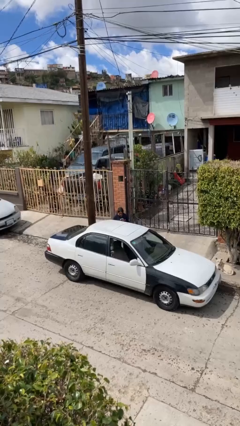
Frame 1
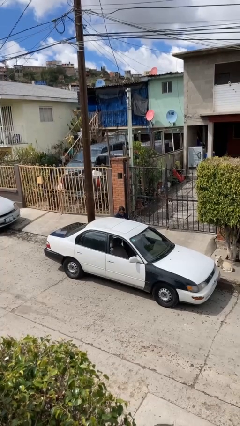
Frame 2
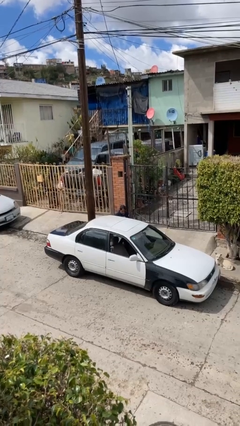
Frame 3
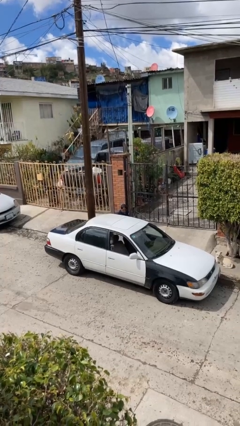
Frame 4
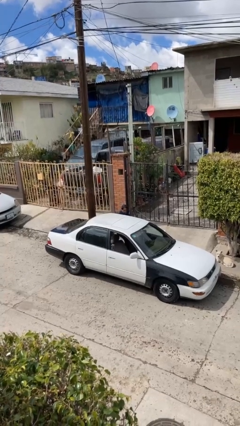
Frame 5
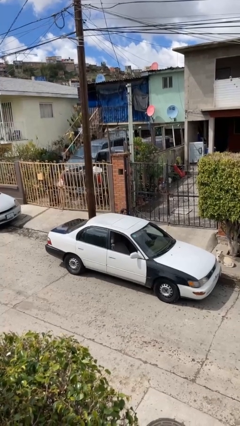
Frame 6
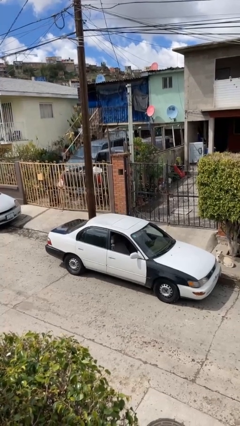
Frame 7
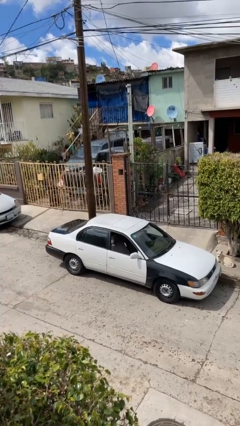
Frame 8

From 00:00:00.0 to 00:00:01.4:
person enters car

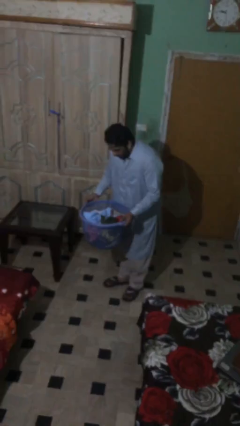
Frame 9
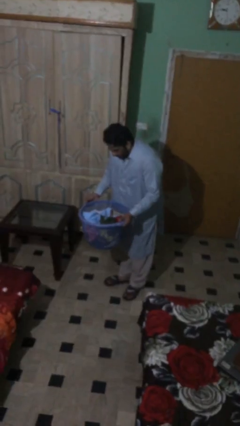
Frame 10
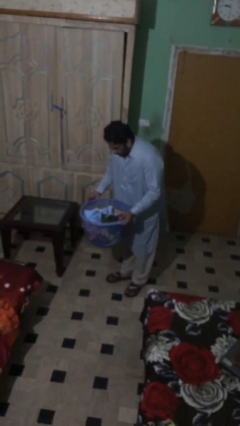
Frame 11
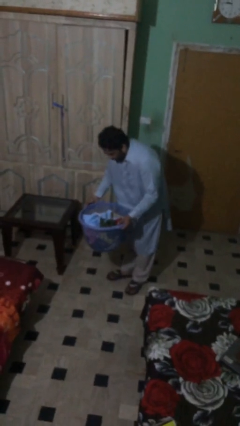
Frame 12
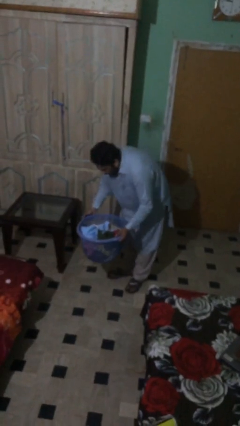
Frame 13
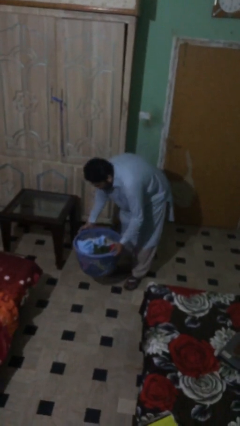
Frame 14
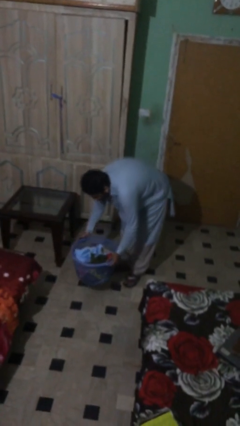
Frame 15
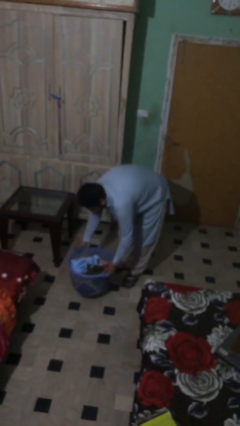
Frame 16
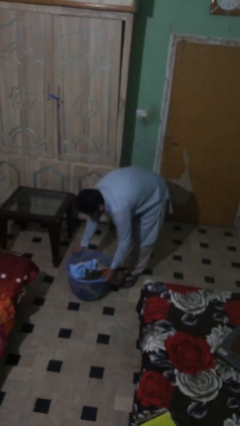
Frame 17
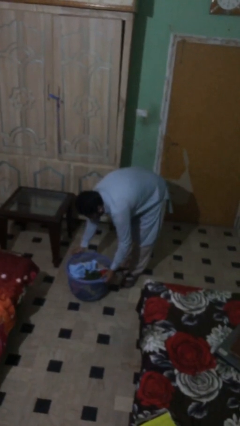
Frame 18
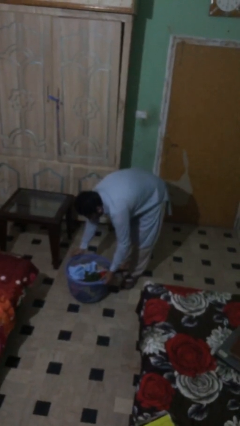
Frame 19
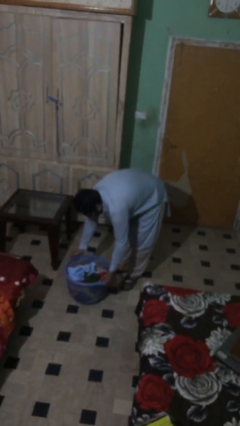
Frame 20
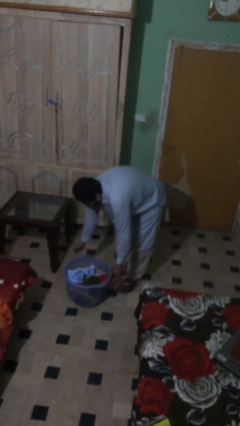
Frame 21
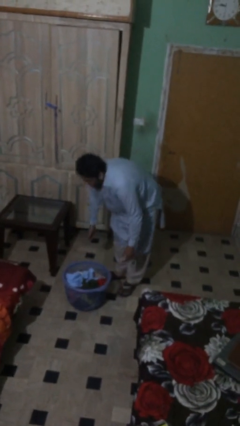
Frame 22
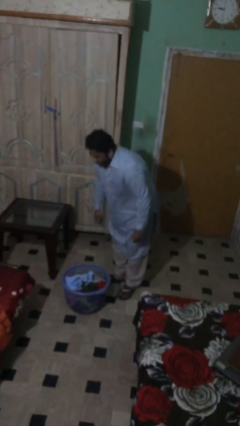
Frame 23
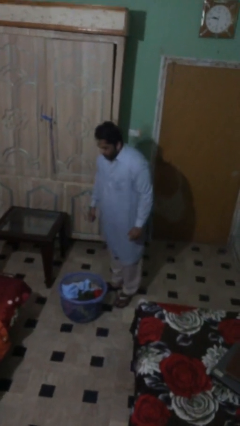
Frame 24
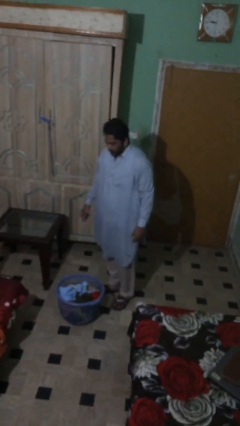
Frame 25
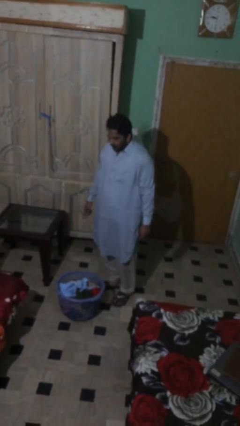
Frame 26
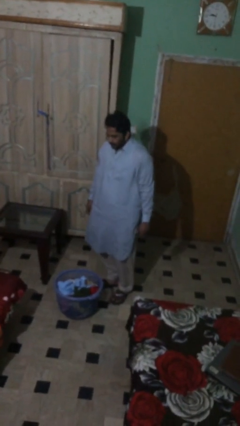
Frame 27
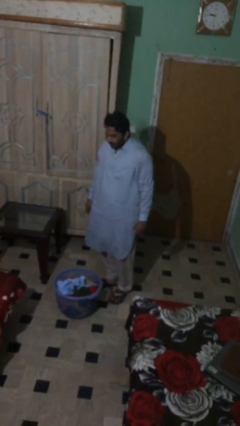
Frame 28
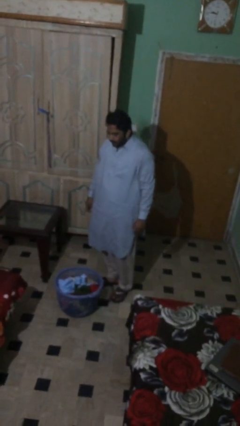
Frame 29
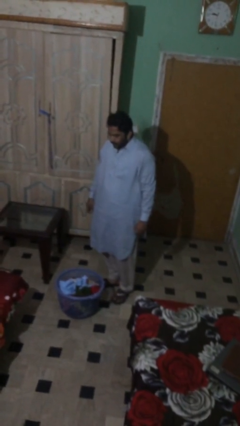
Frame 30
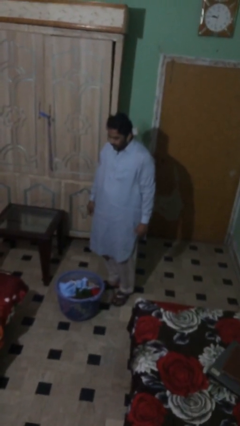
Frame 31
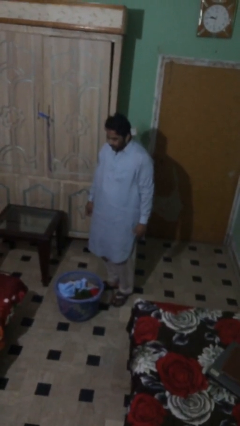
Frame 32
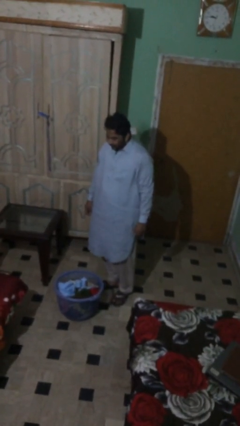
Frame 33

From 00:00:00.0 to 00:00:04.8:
person puts down object on floor

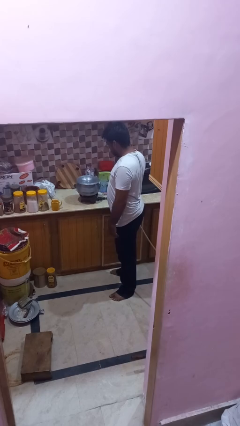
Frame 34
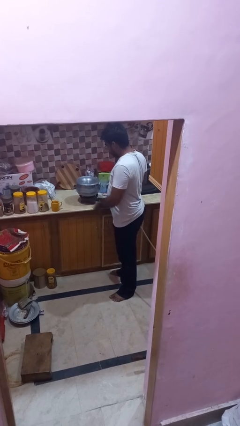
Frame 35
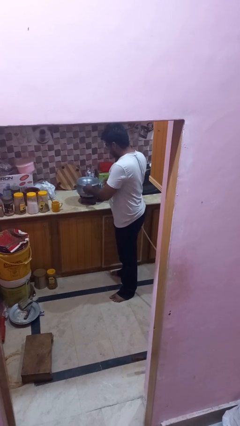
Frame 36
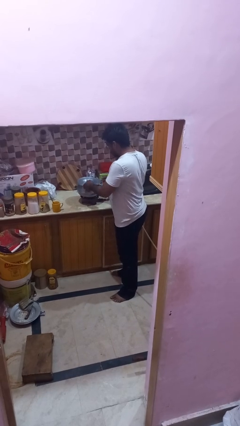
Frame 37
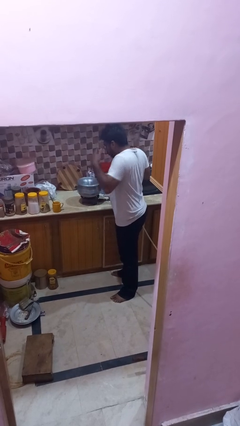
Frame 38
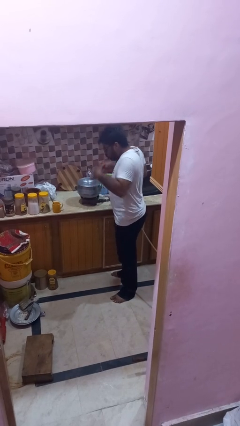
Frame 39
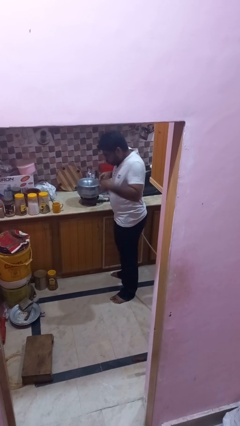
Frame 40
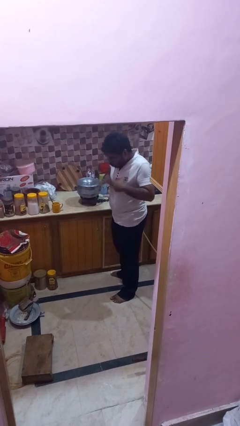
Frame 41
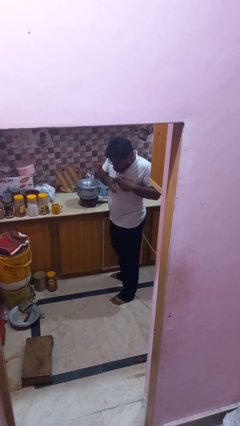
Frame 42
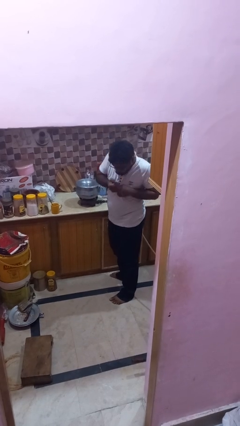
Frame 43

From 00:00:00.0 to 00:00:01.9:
person burns hand

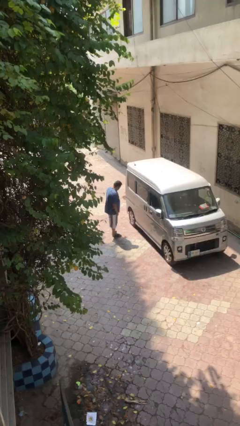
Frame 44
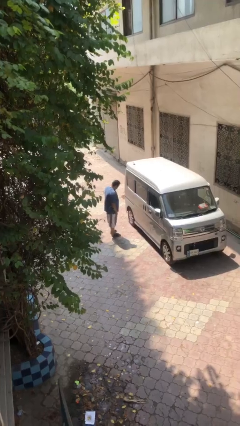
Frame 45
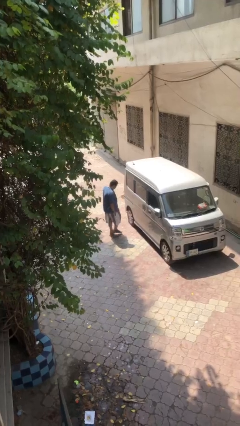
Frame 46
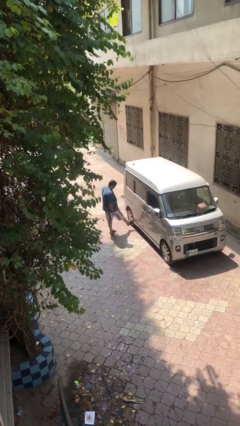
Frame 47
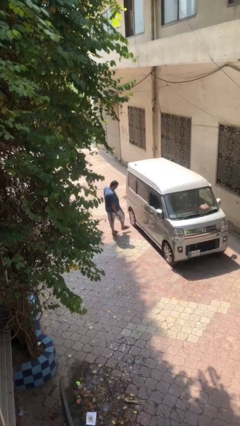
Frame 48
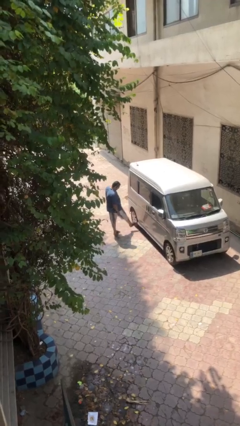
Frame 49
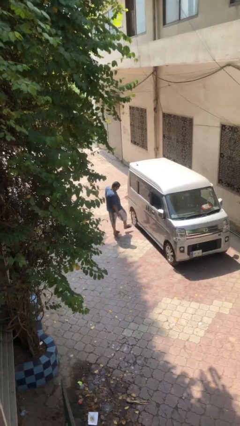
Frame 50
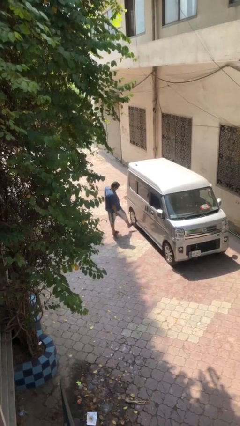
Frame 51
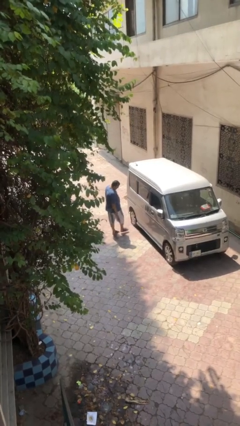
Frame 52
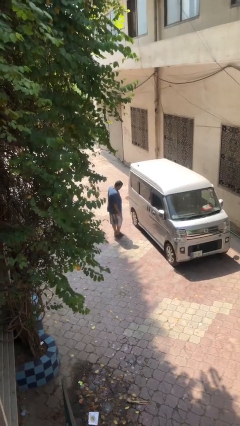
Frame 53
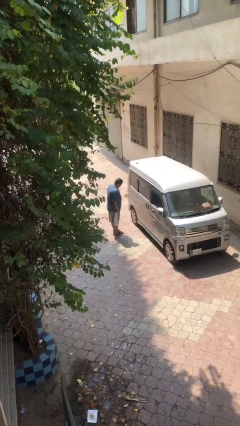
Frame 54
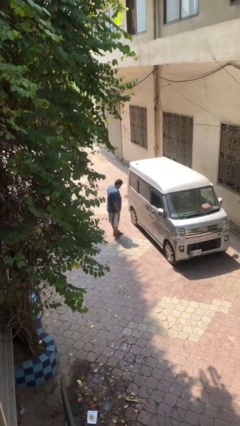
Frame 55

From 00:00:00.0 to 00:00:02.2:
person kicks car tires

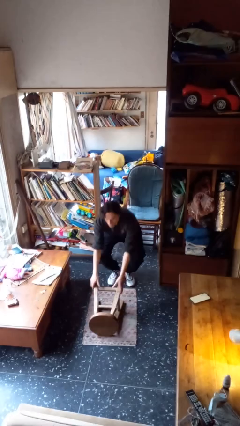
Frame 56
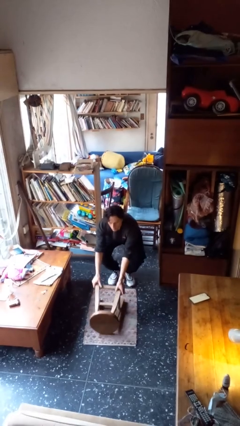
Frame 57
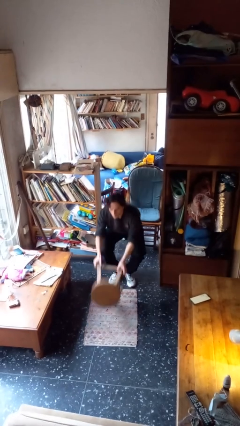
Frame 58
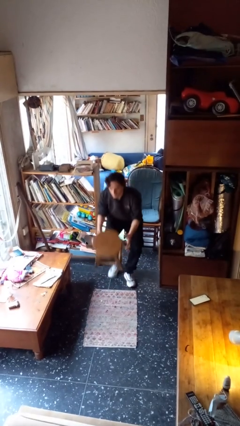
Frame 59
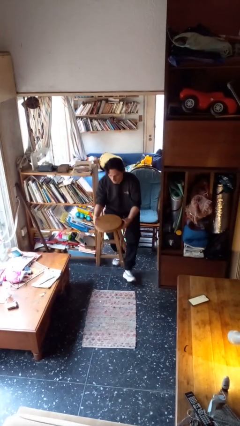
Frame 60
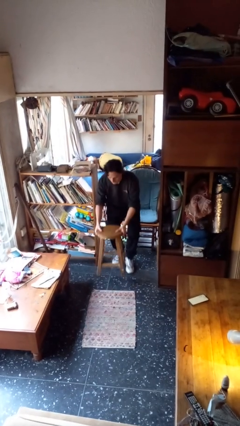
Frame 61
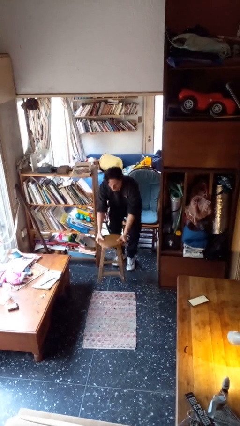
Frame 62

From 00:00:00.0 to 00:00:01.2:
person sets upright furniture

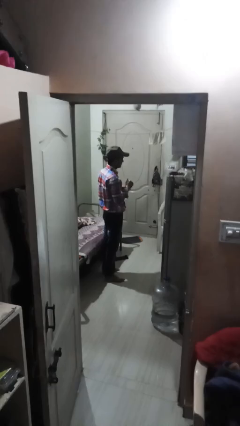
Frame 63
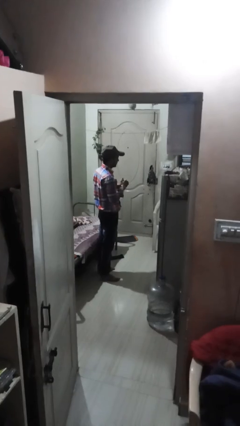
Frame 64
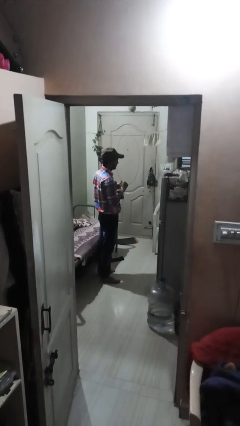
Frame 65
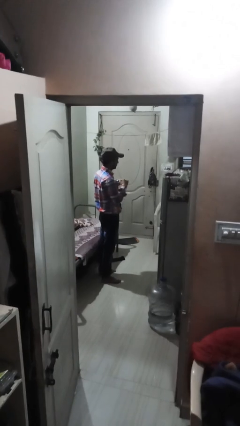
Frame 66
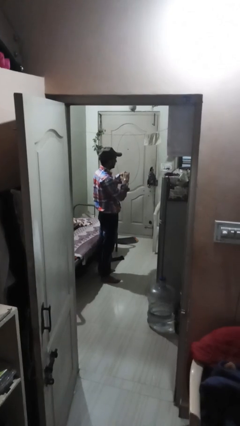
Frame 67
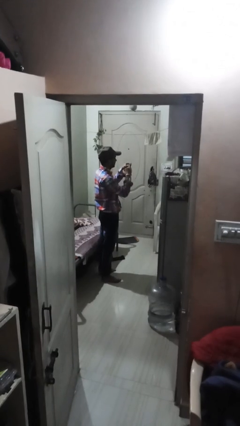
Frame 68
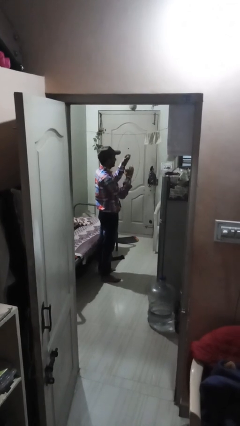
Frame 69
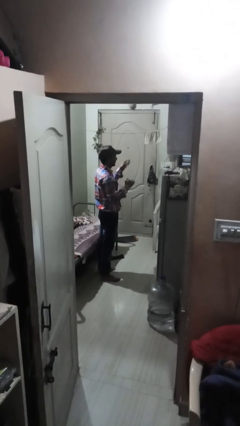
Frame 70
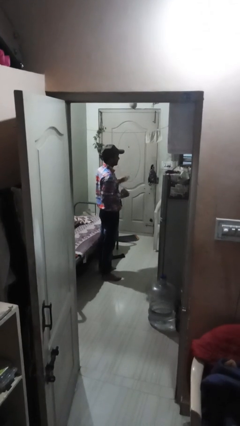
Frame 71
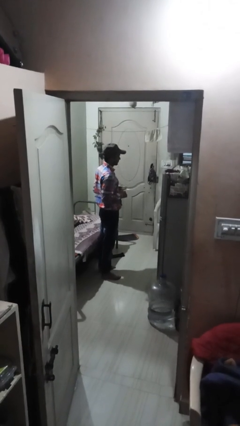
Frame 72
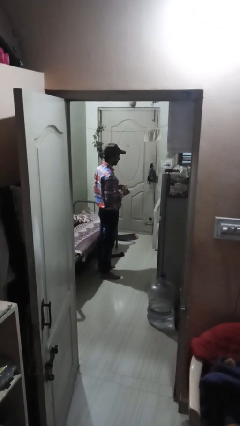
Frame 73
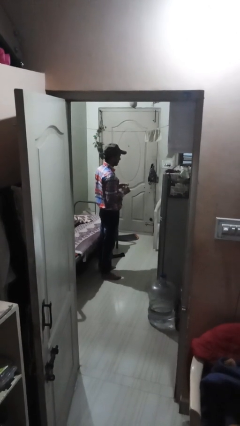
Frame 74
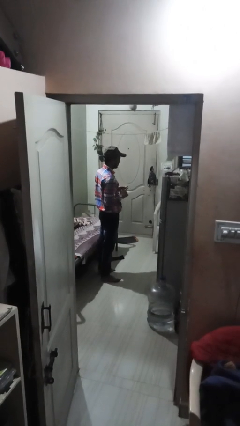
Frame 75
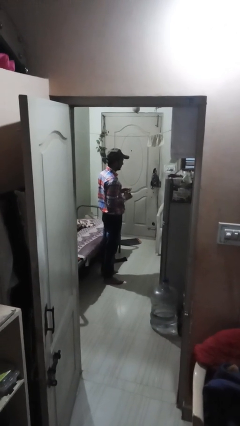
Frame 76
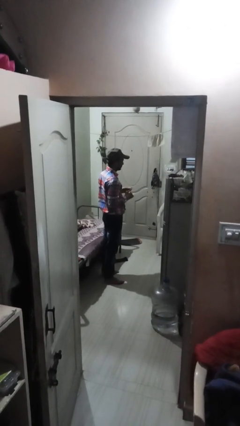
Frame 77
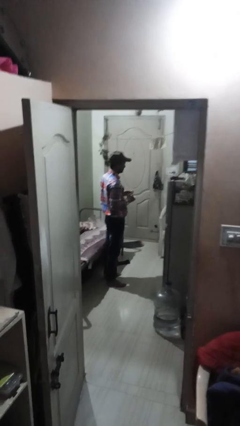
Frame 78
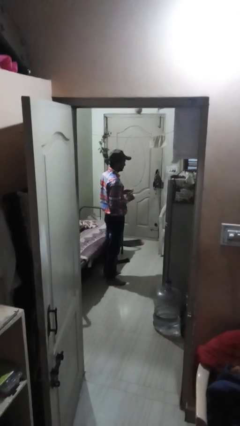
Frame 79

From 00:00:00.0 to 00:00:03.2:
person takes off ring

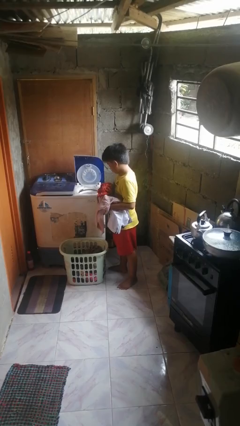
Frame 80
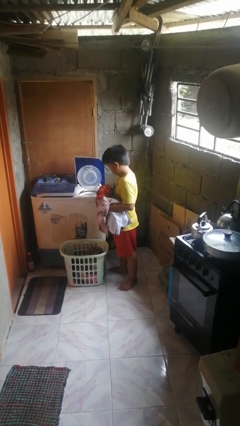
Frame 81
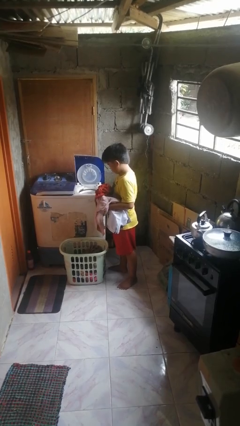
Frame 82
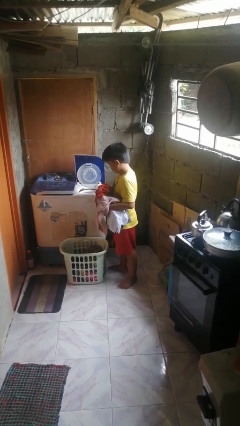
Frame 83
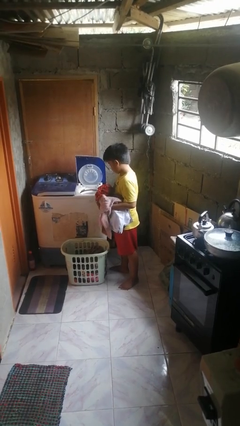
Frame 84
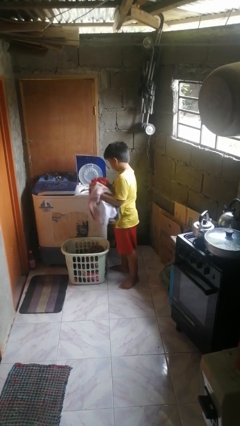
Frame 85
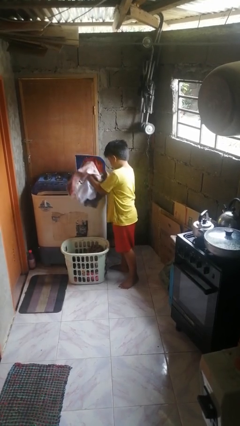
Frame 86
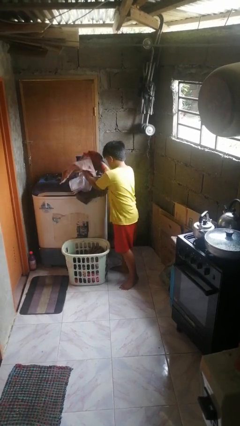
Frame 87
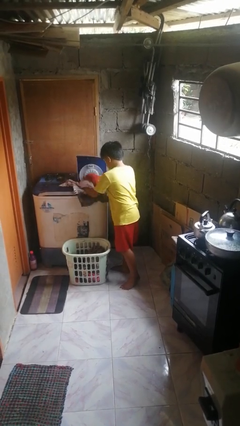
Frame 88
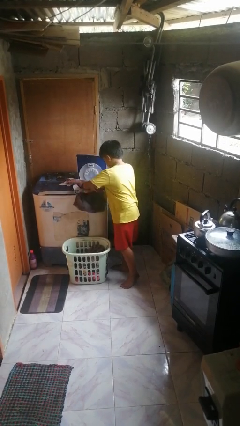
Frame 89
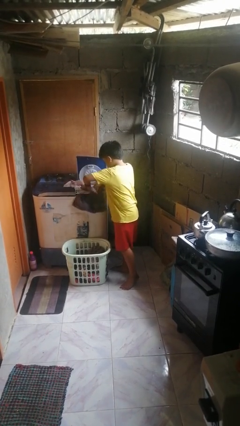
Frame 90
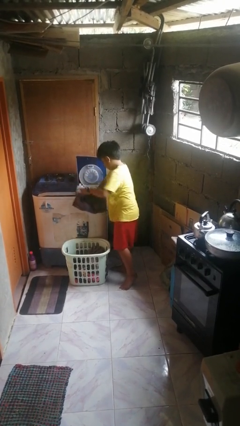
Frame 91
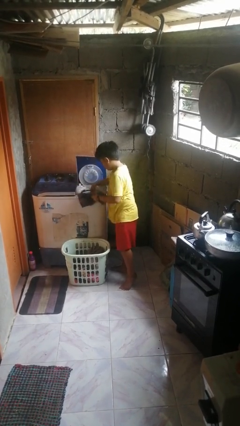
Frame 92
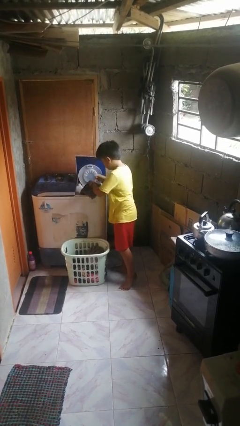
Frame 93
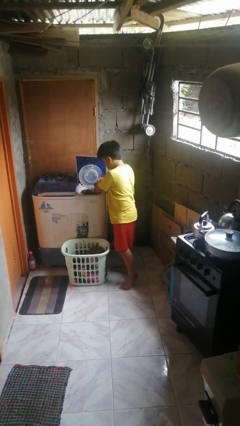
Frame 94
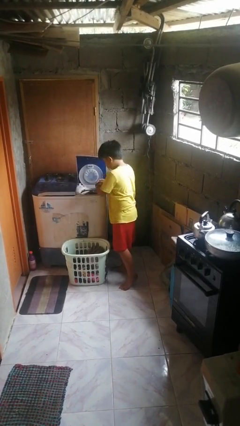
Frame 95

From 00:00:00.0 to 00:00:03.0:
person loads dryer
